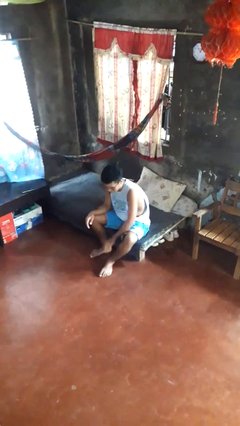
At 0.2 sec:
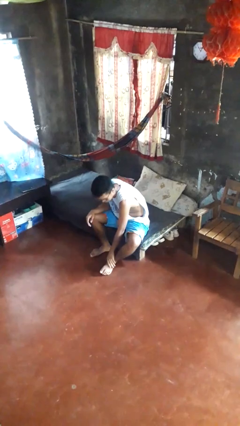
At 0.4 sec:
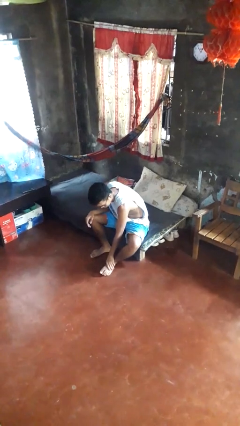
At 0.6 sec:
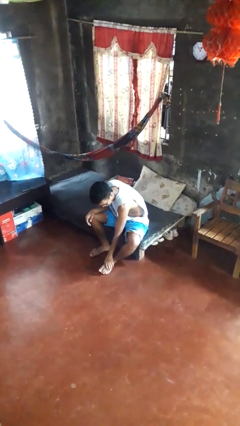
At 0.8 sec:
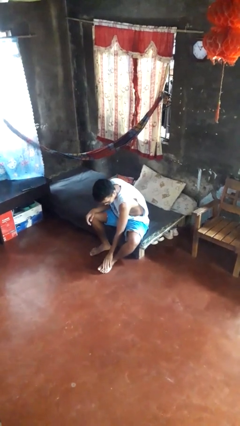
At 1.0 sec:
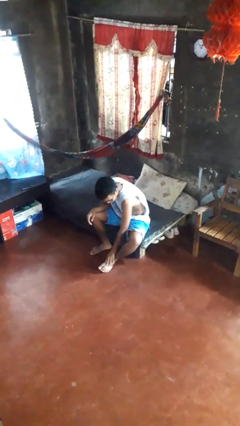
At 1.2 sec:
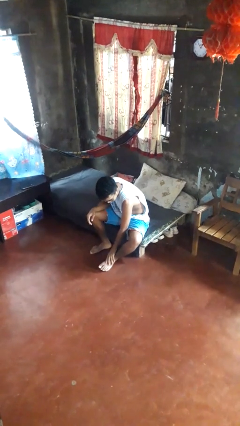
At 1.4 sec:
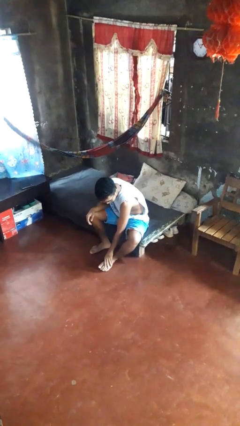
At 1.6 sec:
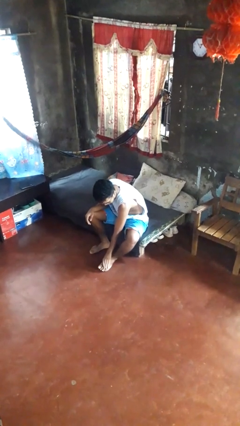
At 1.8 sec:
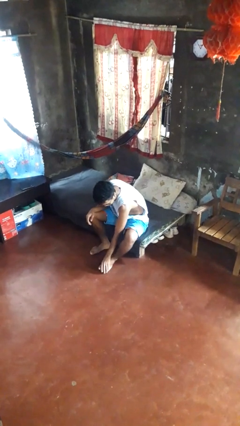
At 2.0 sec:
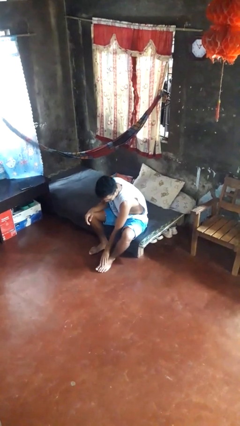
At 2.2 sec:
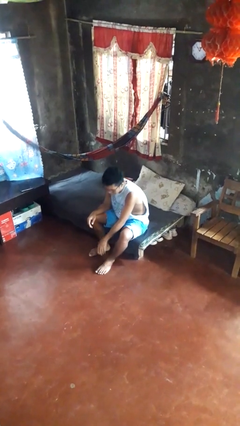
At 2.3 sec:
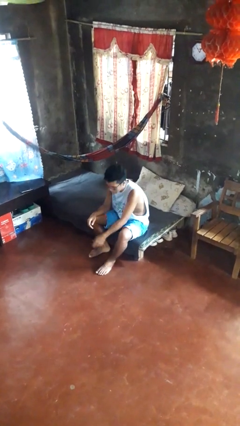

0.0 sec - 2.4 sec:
person rubs foot

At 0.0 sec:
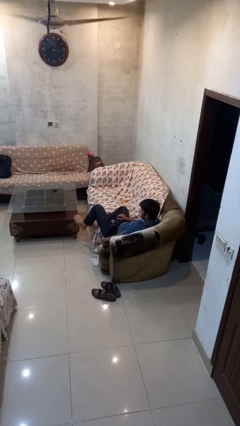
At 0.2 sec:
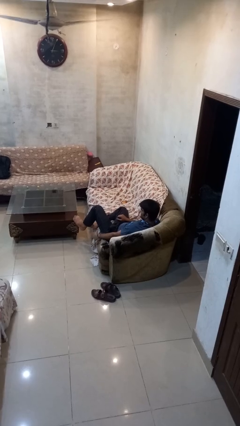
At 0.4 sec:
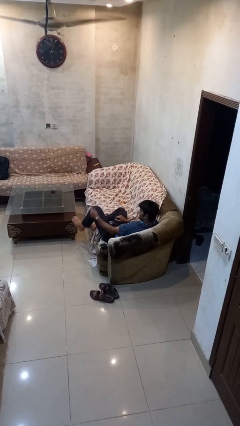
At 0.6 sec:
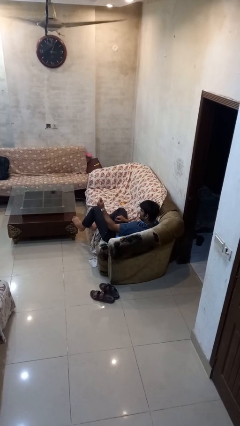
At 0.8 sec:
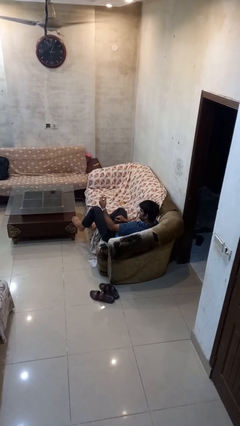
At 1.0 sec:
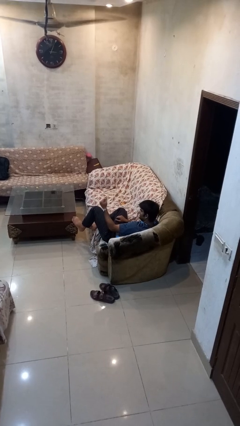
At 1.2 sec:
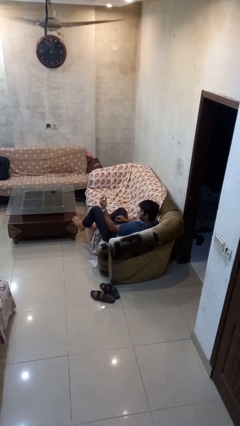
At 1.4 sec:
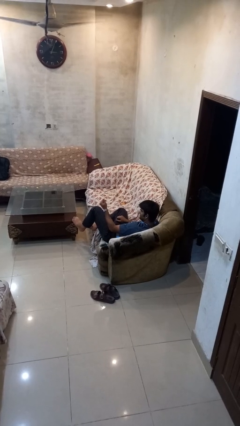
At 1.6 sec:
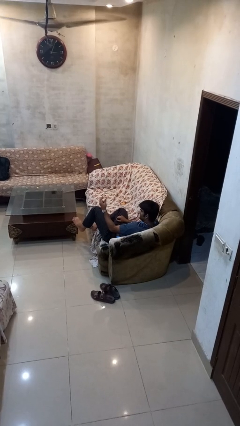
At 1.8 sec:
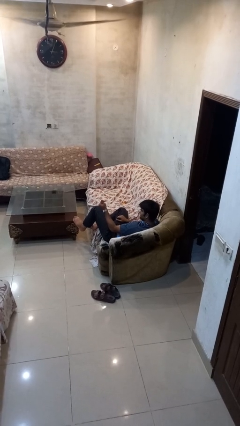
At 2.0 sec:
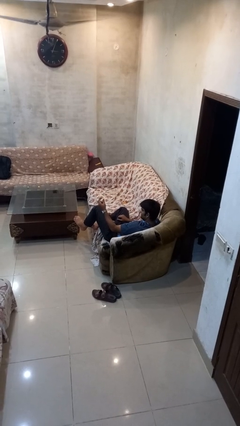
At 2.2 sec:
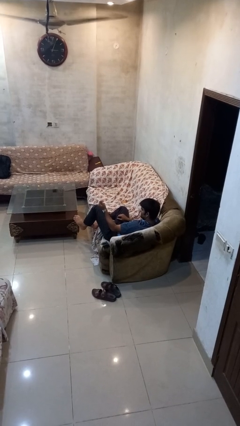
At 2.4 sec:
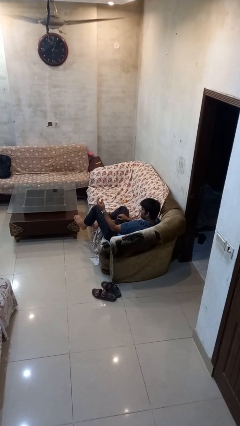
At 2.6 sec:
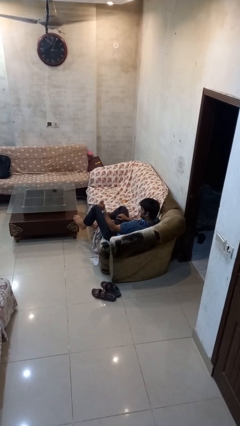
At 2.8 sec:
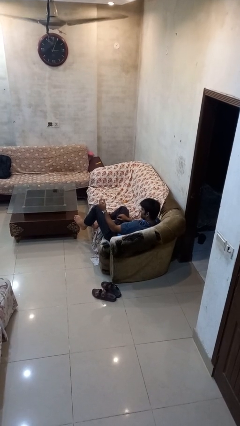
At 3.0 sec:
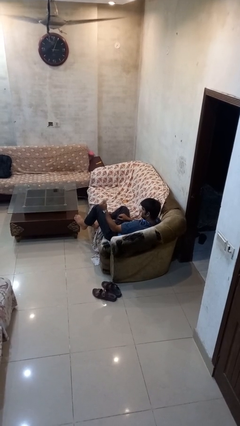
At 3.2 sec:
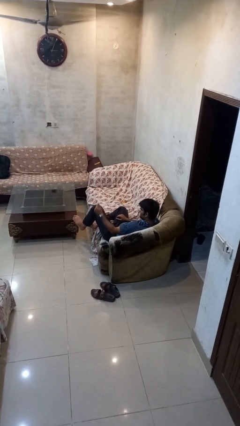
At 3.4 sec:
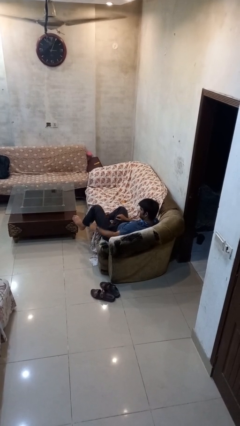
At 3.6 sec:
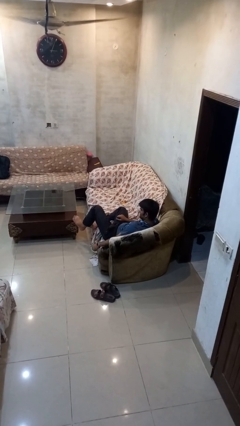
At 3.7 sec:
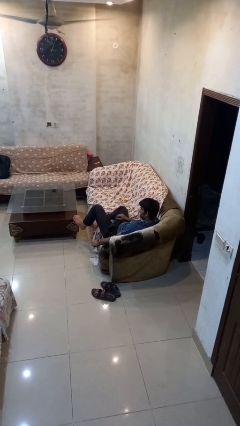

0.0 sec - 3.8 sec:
person snaps fingers

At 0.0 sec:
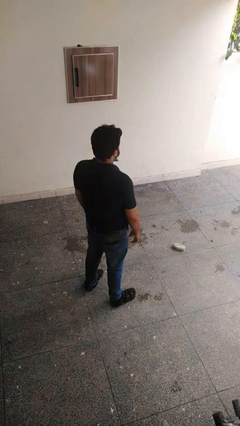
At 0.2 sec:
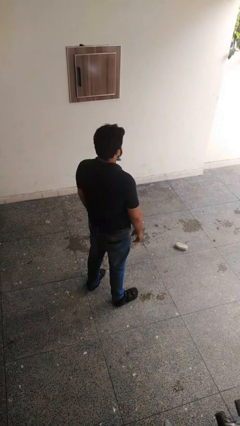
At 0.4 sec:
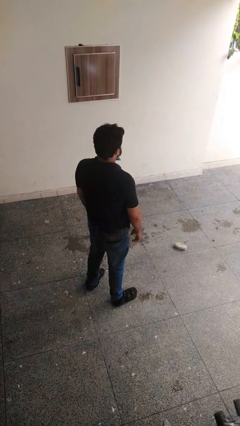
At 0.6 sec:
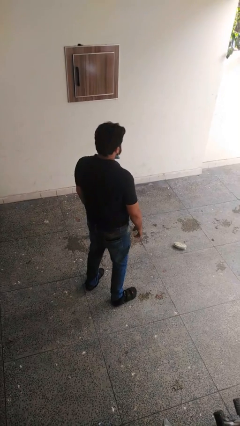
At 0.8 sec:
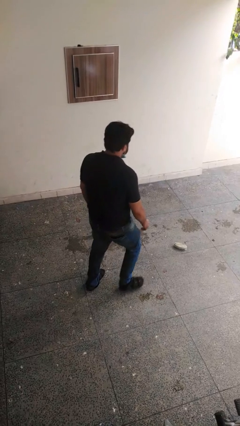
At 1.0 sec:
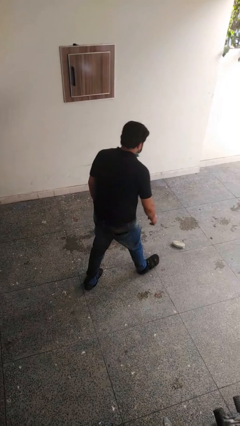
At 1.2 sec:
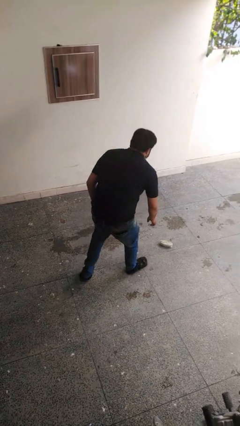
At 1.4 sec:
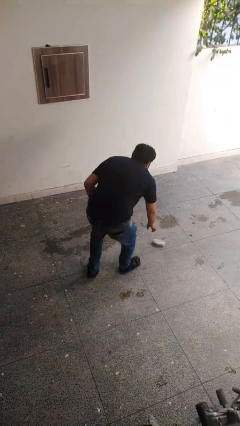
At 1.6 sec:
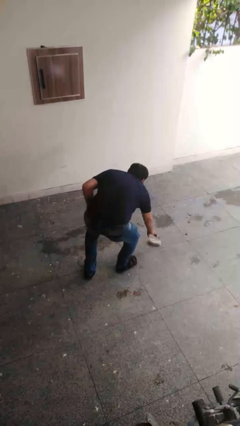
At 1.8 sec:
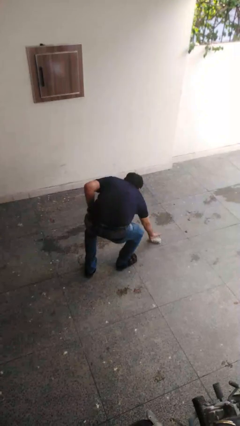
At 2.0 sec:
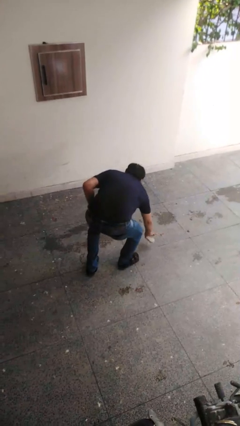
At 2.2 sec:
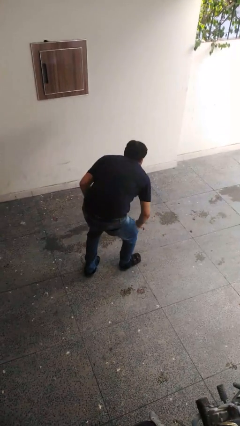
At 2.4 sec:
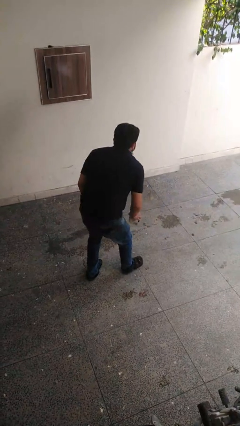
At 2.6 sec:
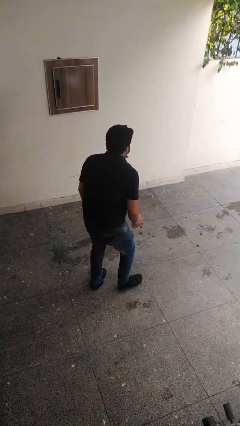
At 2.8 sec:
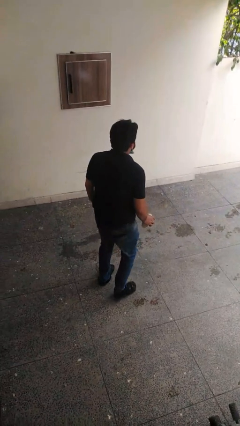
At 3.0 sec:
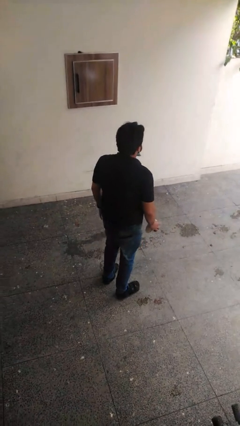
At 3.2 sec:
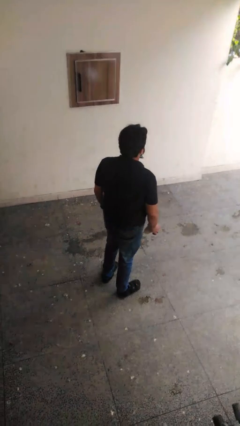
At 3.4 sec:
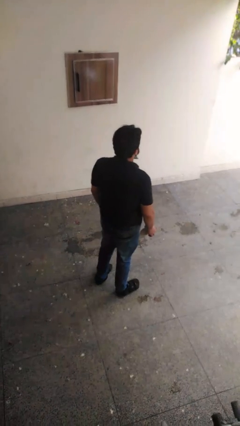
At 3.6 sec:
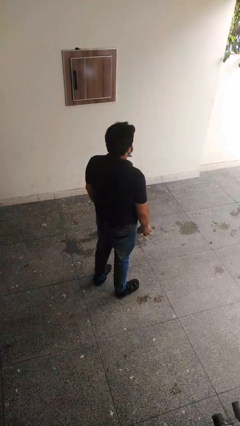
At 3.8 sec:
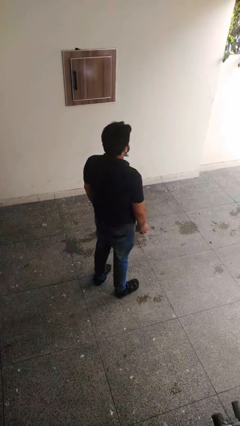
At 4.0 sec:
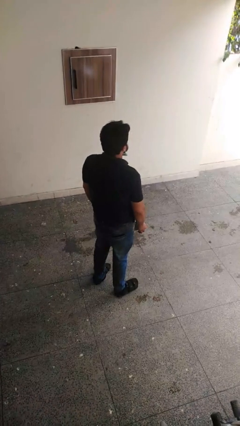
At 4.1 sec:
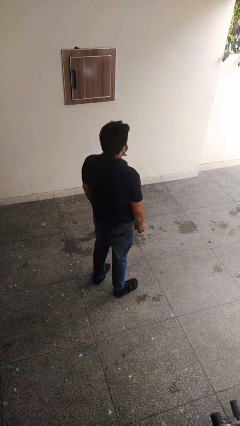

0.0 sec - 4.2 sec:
person picks up object from floor

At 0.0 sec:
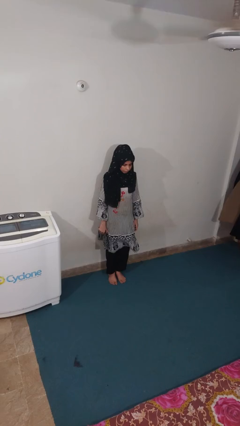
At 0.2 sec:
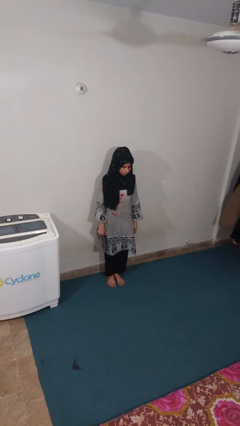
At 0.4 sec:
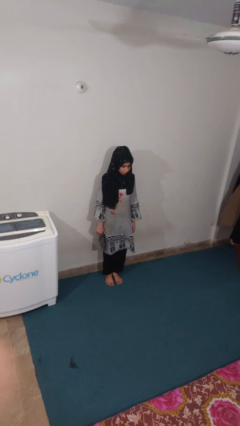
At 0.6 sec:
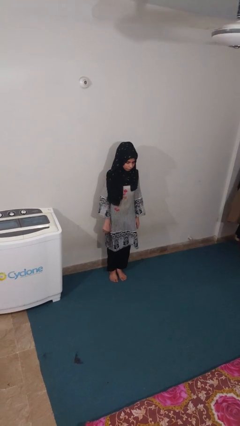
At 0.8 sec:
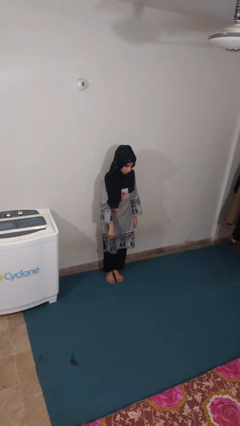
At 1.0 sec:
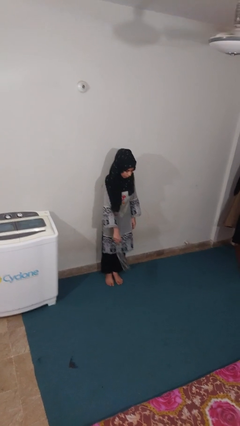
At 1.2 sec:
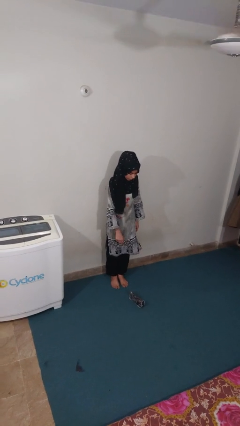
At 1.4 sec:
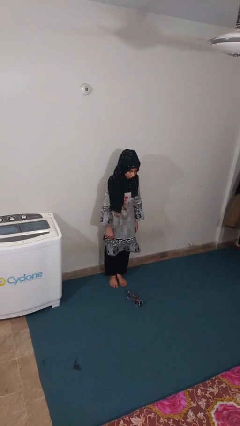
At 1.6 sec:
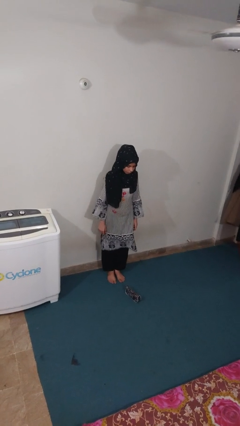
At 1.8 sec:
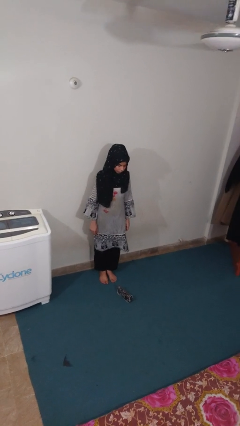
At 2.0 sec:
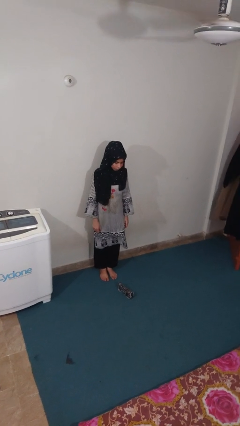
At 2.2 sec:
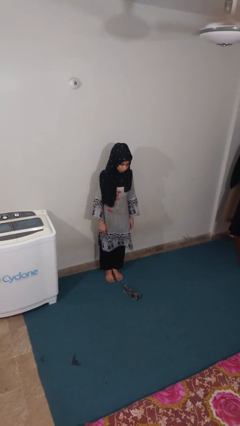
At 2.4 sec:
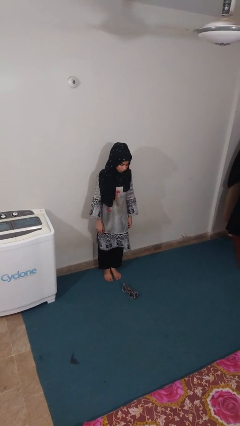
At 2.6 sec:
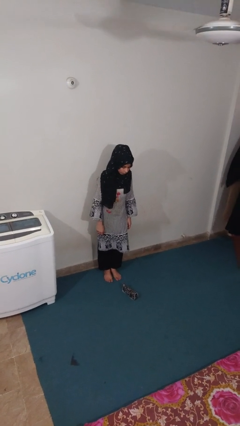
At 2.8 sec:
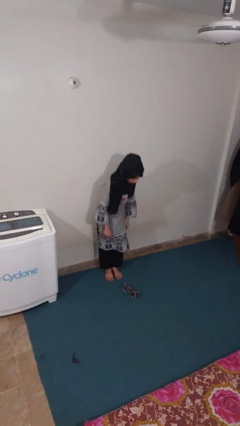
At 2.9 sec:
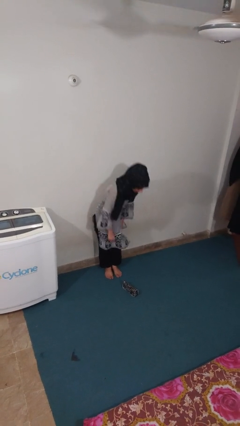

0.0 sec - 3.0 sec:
person throws object to ground

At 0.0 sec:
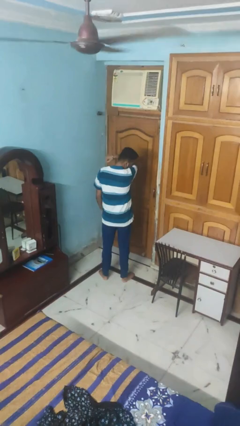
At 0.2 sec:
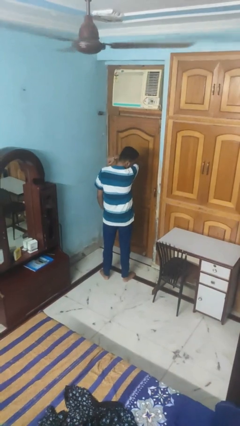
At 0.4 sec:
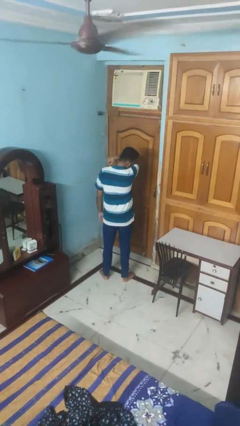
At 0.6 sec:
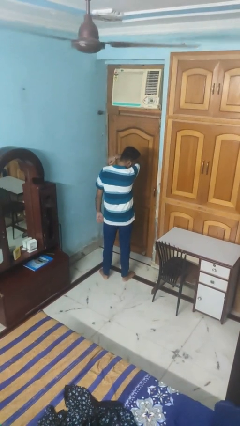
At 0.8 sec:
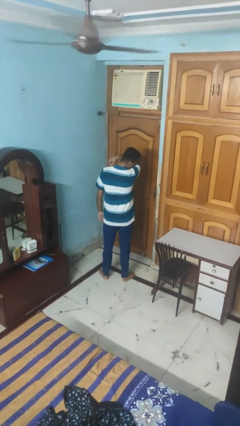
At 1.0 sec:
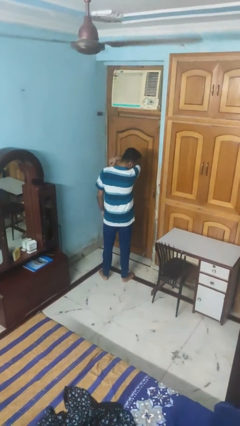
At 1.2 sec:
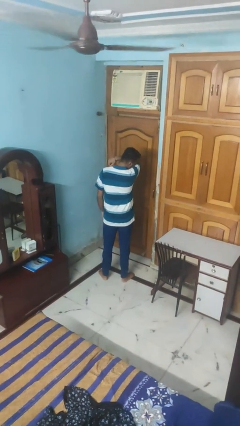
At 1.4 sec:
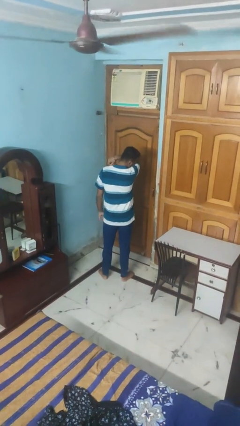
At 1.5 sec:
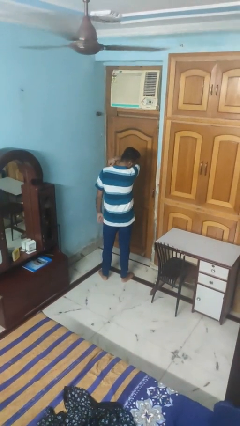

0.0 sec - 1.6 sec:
person sneezes into arm

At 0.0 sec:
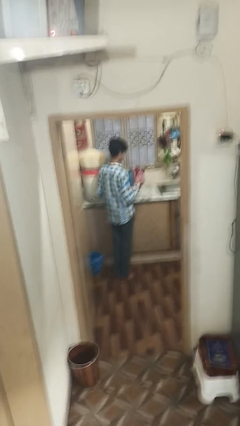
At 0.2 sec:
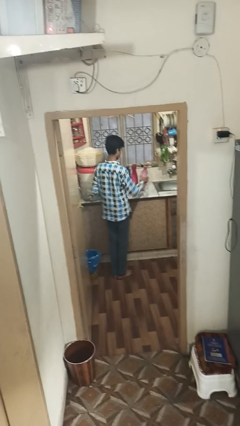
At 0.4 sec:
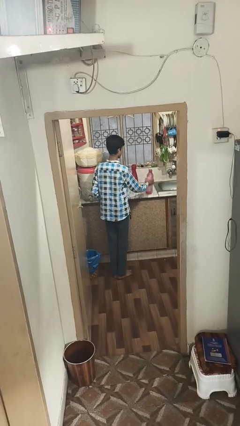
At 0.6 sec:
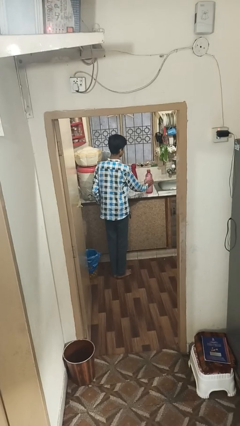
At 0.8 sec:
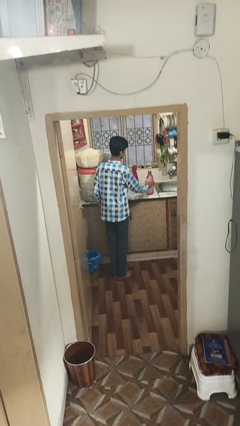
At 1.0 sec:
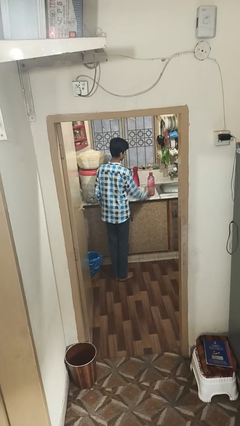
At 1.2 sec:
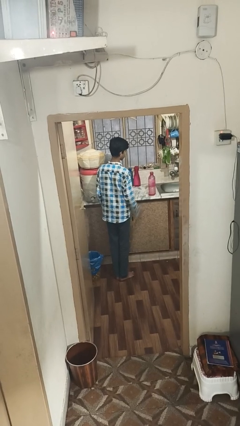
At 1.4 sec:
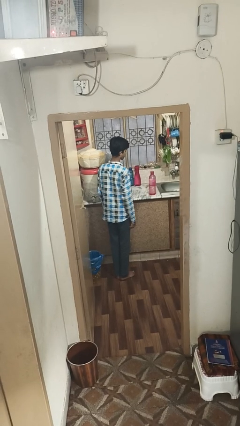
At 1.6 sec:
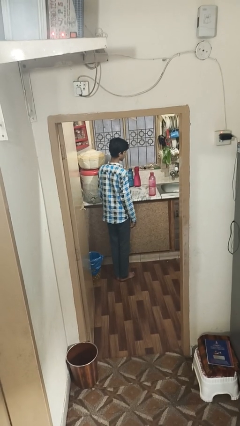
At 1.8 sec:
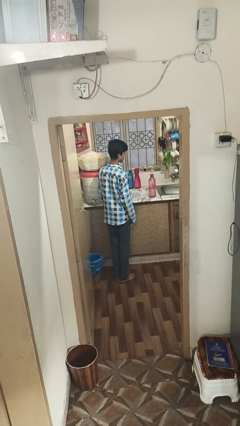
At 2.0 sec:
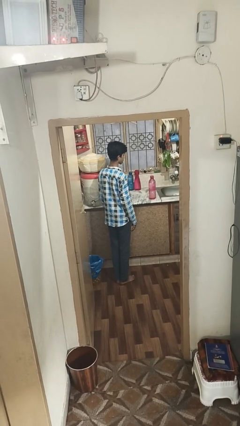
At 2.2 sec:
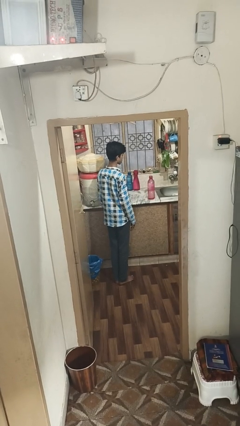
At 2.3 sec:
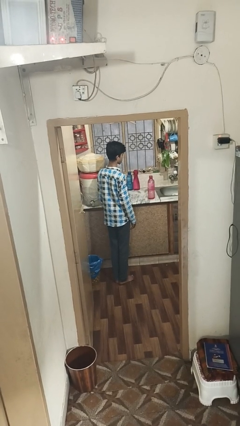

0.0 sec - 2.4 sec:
person puts down object on countertop
